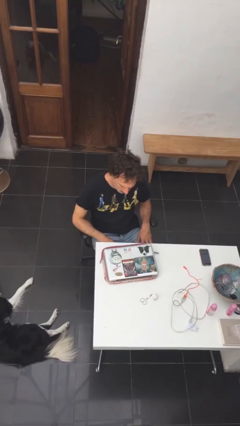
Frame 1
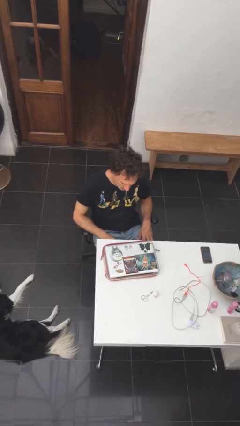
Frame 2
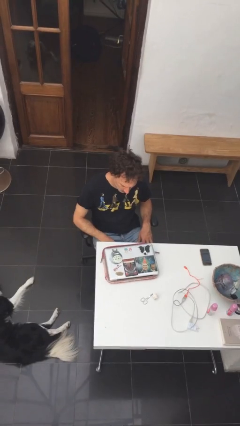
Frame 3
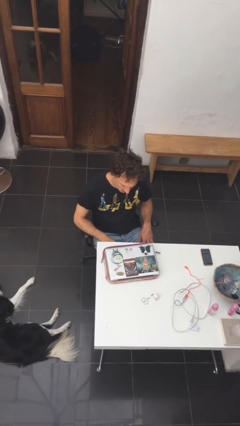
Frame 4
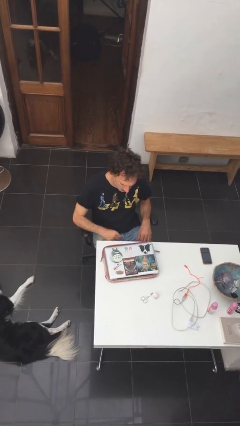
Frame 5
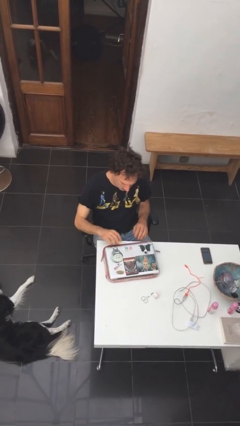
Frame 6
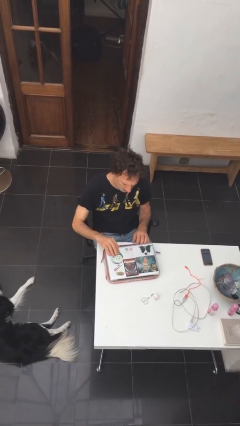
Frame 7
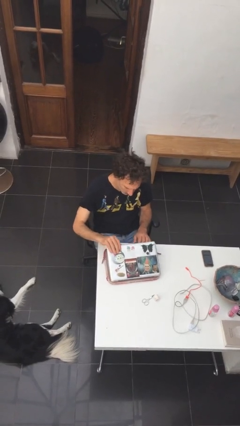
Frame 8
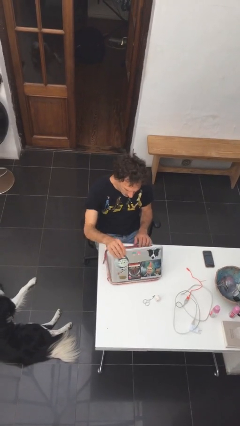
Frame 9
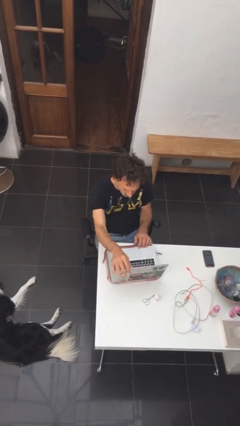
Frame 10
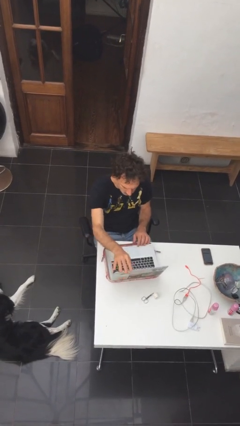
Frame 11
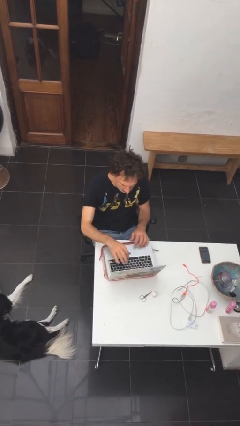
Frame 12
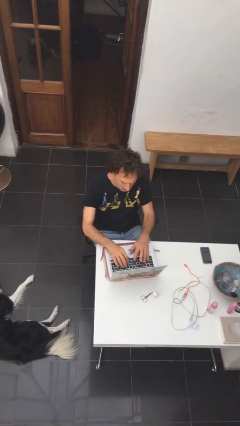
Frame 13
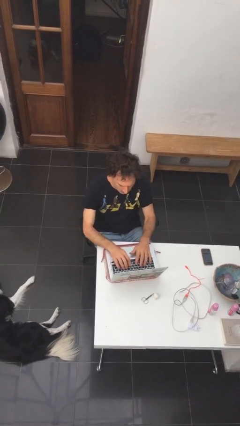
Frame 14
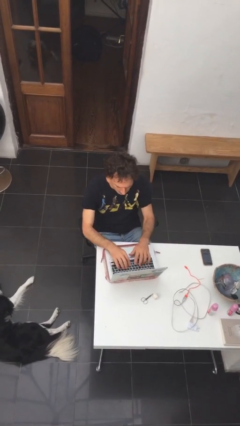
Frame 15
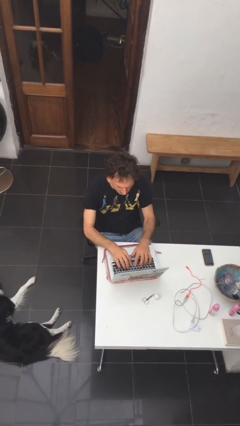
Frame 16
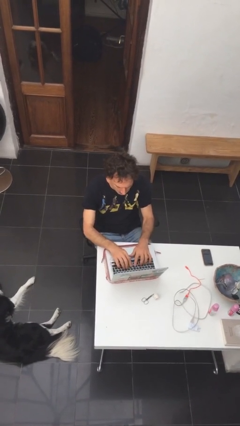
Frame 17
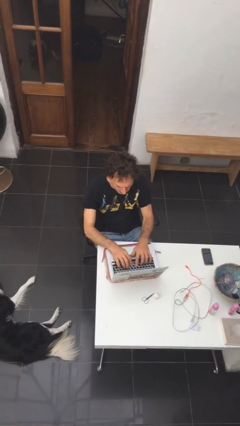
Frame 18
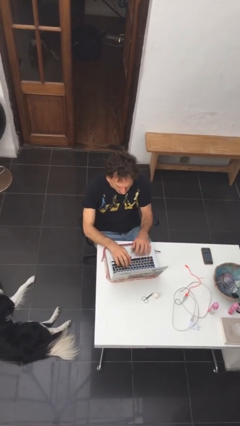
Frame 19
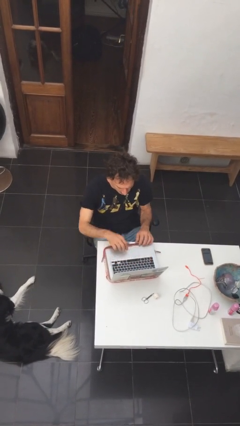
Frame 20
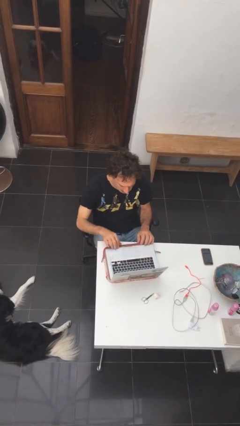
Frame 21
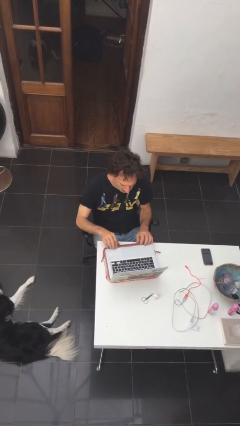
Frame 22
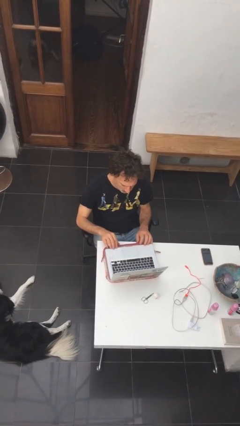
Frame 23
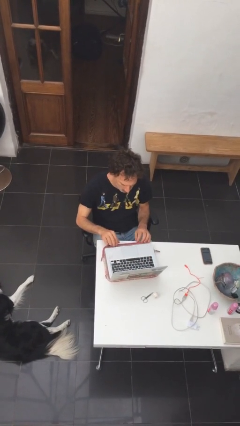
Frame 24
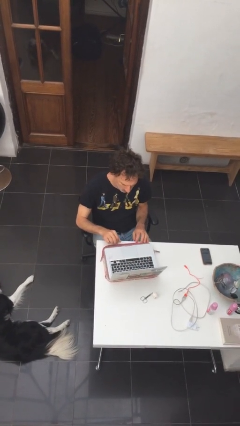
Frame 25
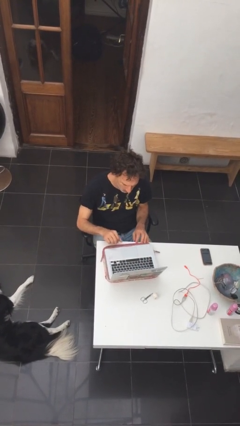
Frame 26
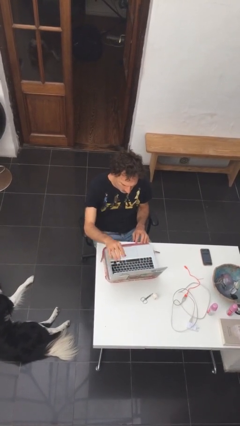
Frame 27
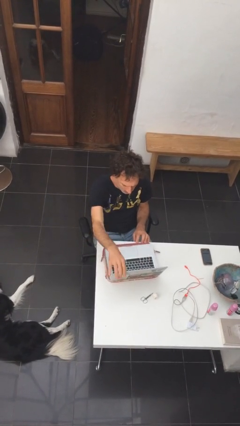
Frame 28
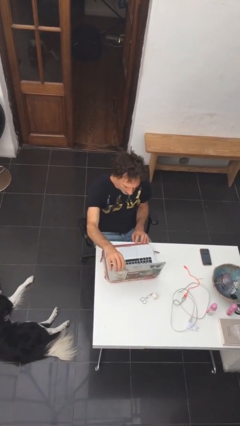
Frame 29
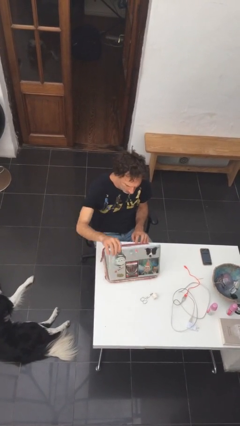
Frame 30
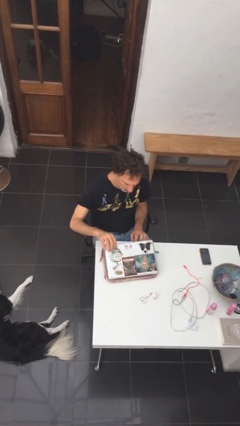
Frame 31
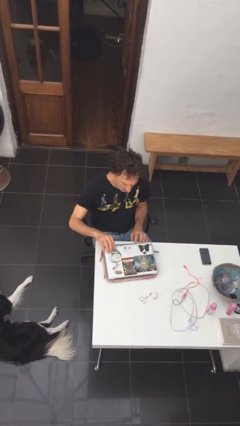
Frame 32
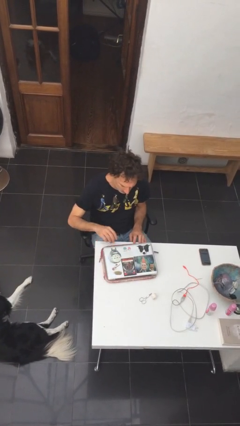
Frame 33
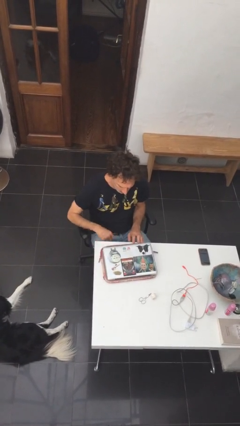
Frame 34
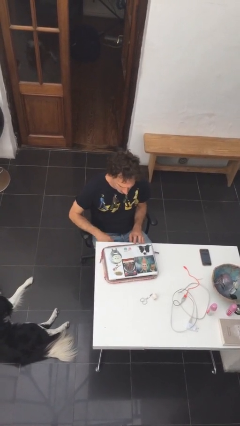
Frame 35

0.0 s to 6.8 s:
person interacts with laptop

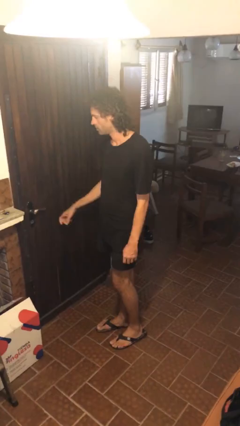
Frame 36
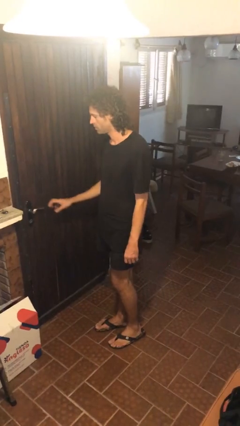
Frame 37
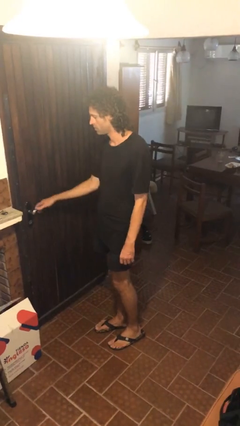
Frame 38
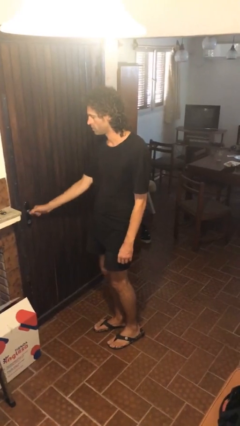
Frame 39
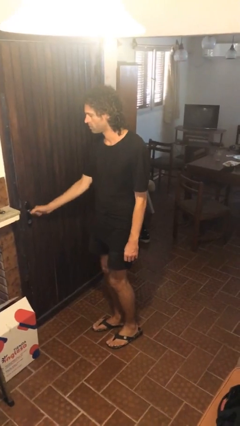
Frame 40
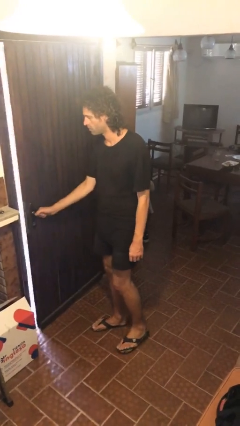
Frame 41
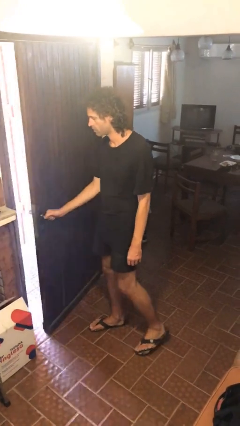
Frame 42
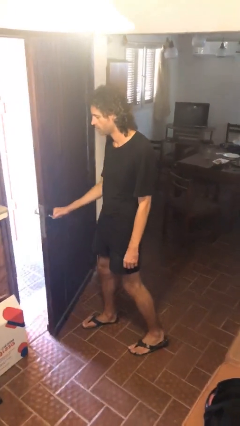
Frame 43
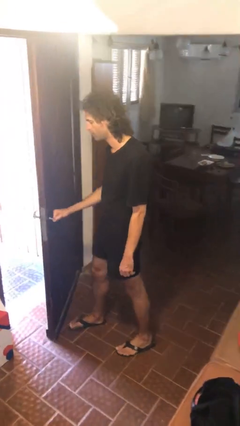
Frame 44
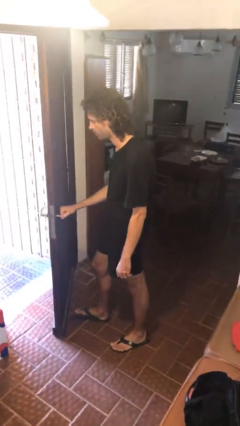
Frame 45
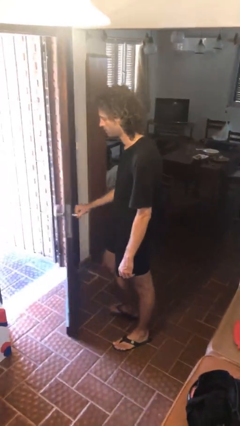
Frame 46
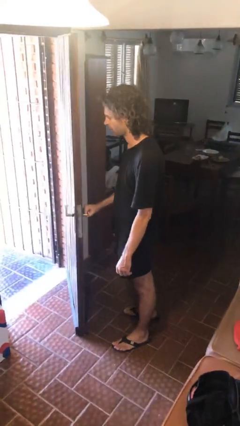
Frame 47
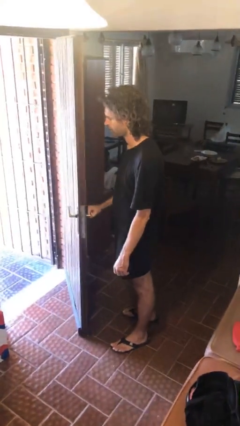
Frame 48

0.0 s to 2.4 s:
person opens facility door

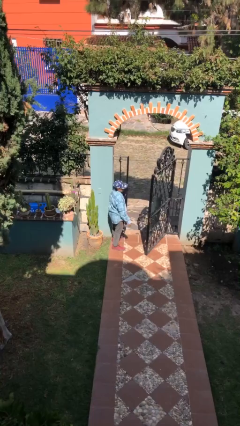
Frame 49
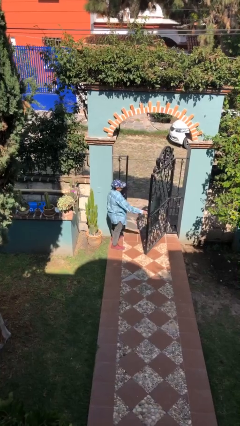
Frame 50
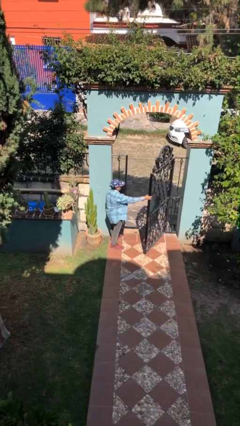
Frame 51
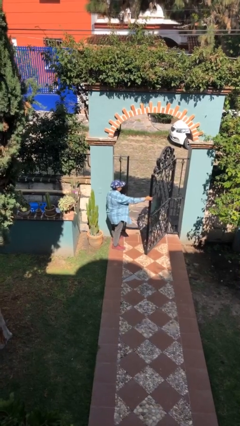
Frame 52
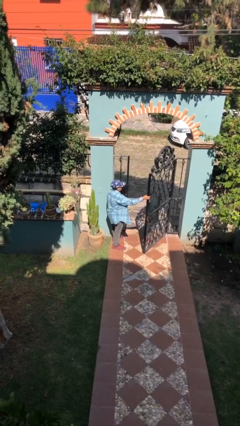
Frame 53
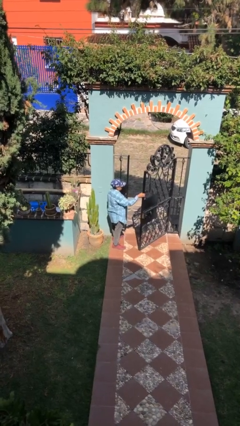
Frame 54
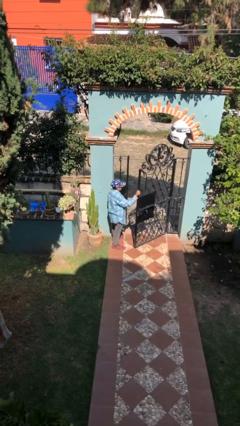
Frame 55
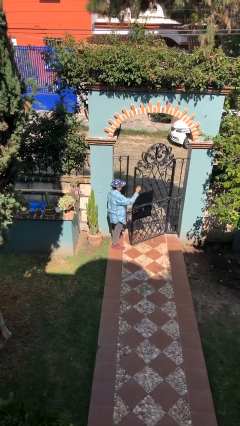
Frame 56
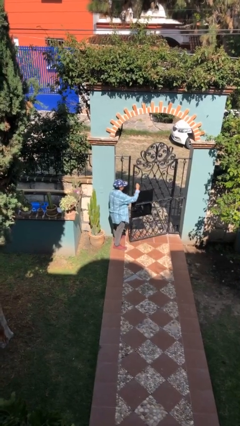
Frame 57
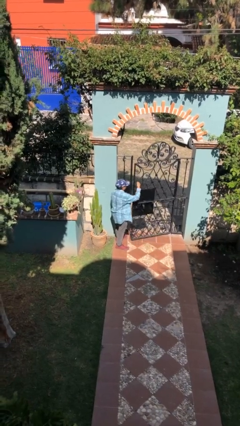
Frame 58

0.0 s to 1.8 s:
person closes facility door

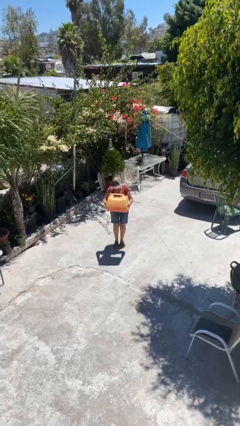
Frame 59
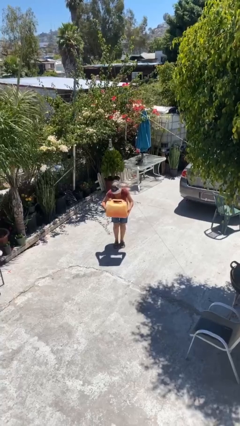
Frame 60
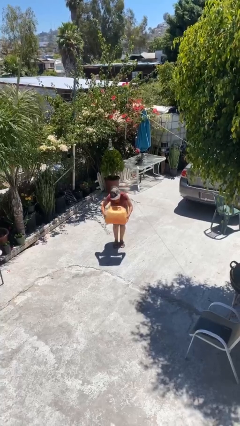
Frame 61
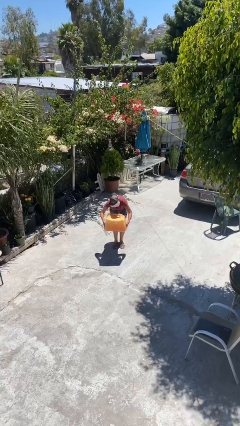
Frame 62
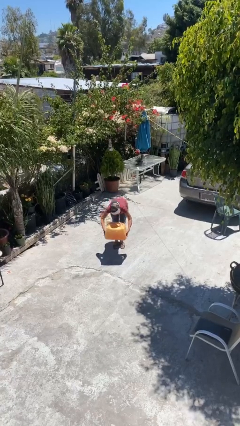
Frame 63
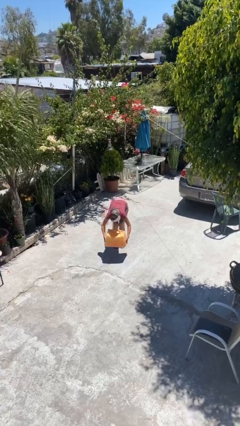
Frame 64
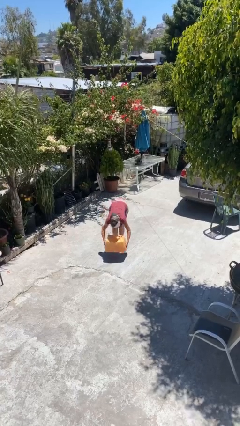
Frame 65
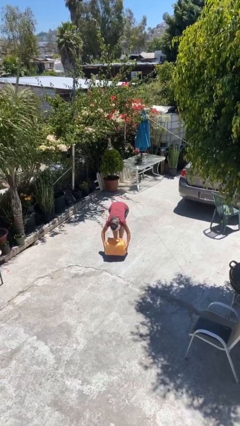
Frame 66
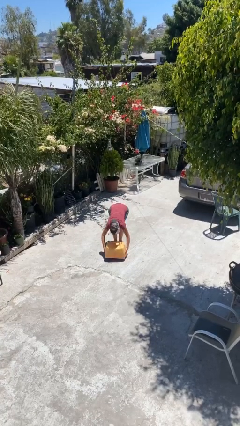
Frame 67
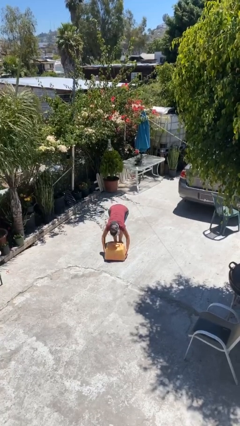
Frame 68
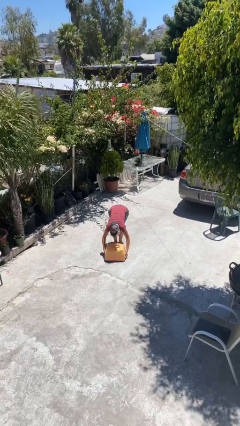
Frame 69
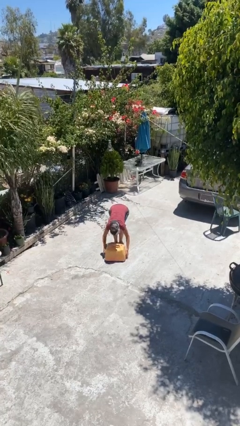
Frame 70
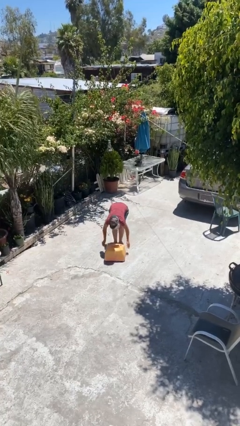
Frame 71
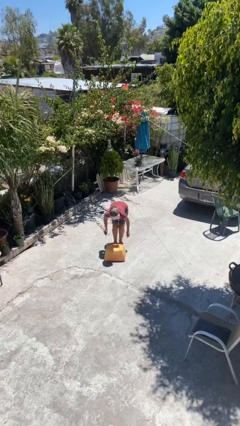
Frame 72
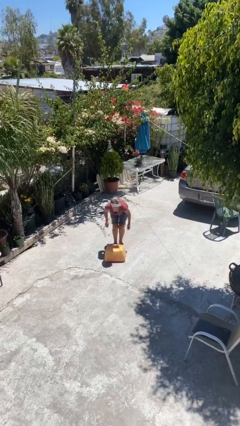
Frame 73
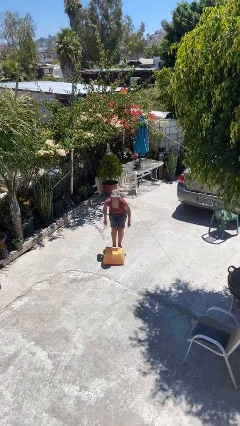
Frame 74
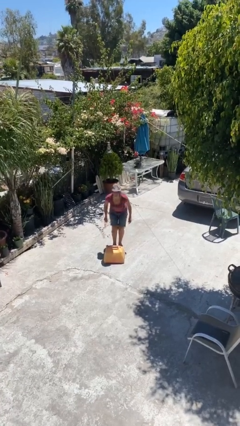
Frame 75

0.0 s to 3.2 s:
person puts down object on floor

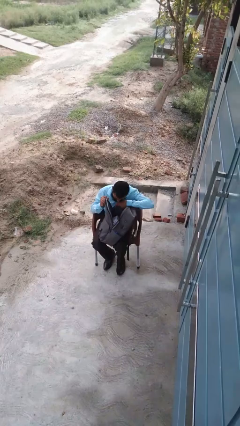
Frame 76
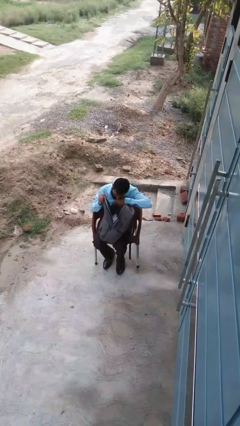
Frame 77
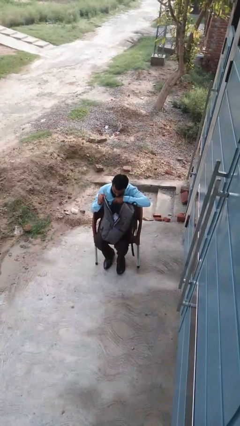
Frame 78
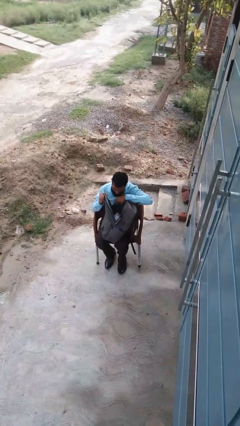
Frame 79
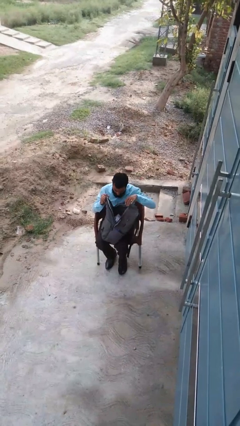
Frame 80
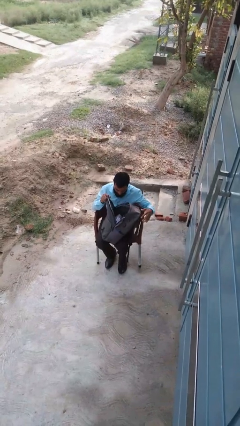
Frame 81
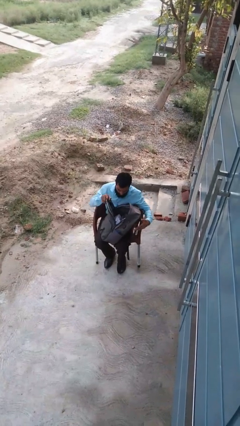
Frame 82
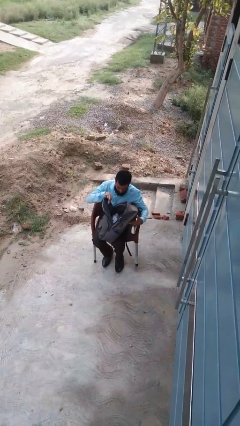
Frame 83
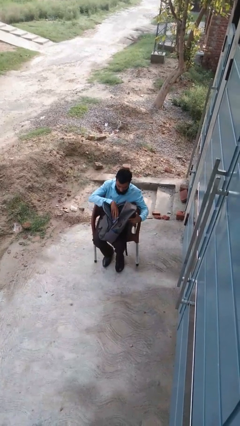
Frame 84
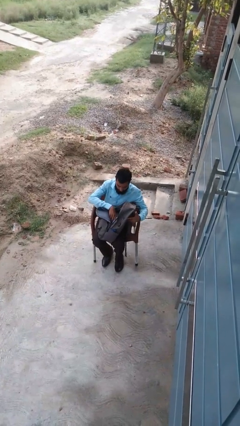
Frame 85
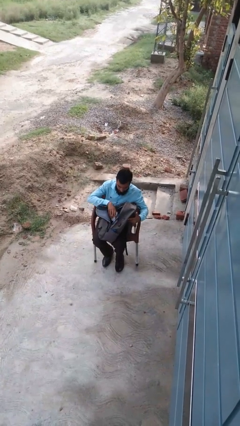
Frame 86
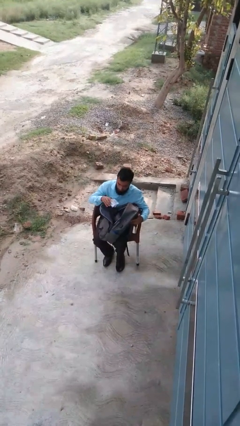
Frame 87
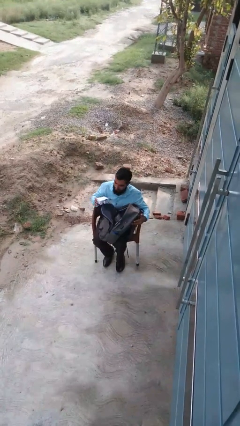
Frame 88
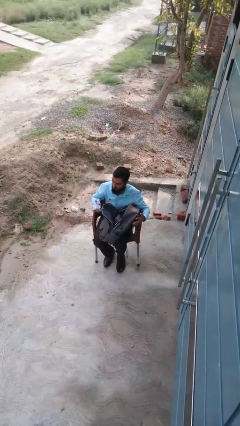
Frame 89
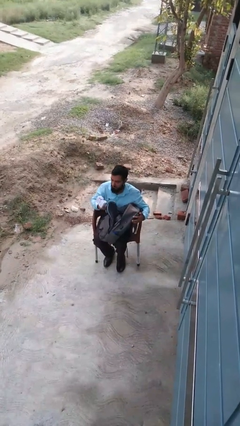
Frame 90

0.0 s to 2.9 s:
person takes object from backpack

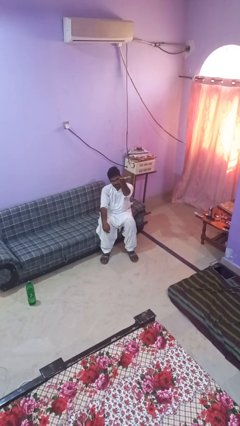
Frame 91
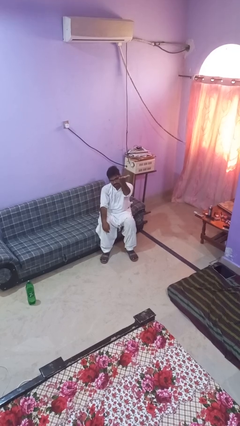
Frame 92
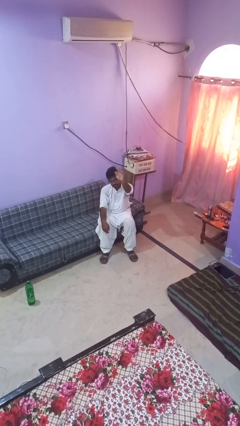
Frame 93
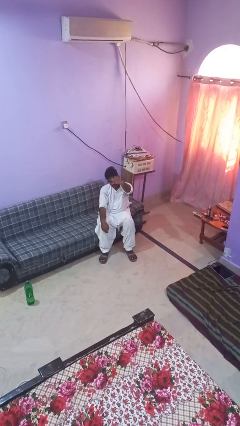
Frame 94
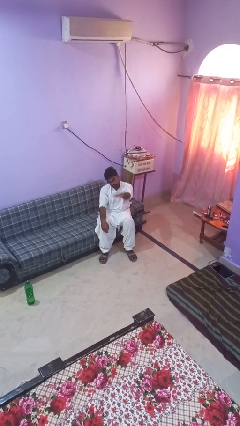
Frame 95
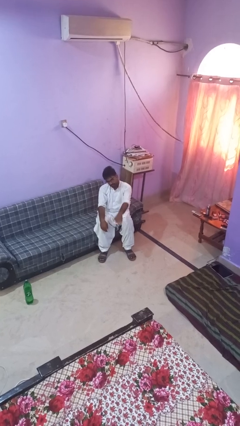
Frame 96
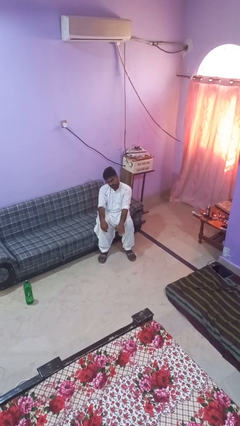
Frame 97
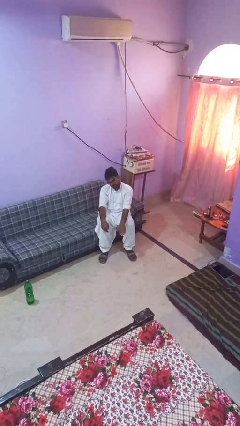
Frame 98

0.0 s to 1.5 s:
person gestures swipe down
